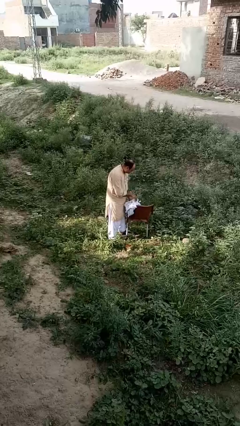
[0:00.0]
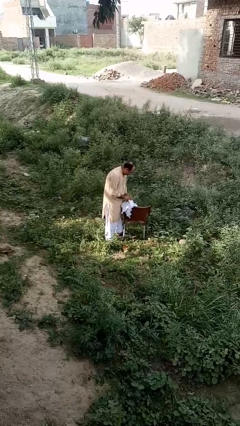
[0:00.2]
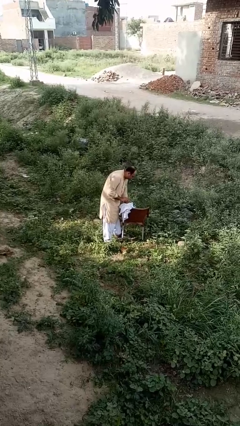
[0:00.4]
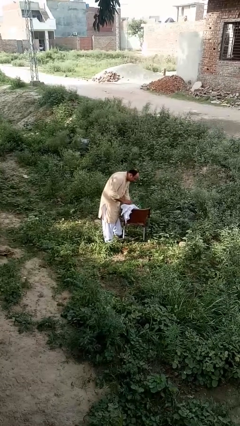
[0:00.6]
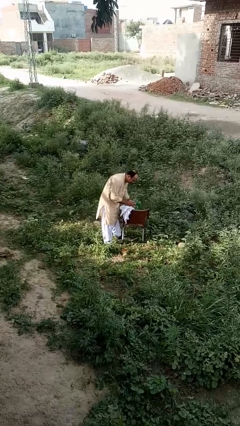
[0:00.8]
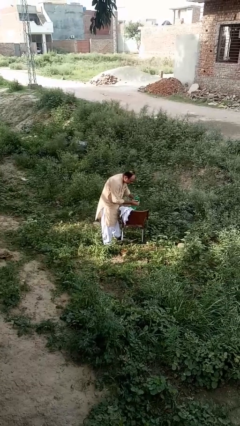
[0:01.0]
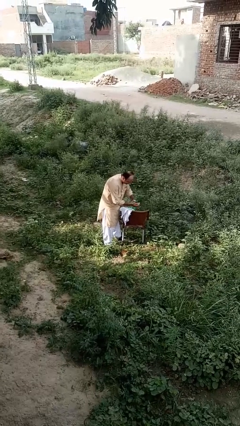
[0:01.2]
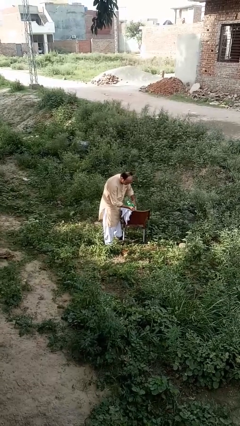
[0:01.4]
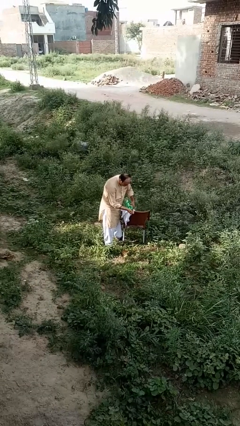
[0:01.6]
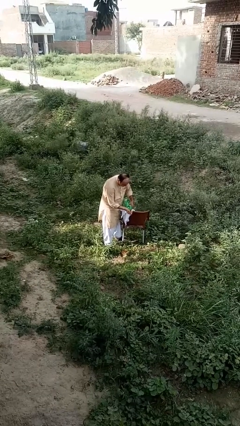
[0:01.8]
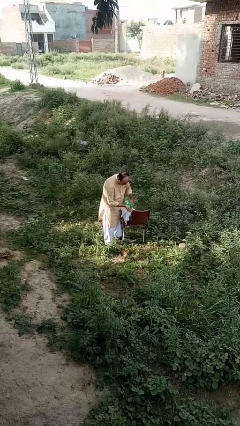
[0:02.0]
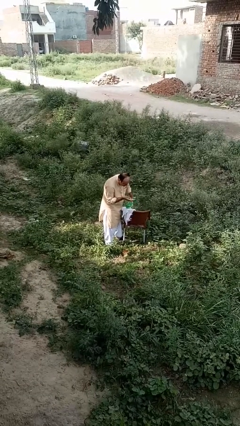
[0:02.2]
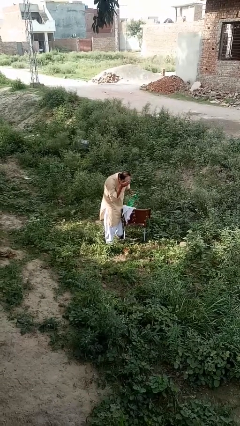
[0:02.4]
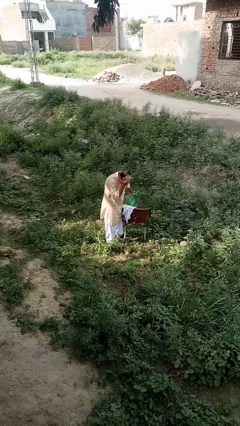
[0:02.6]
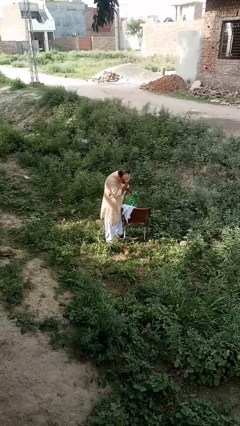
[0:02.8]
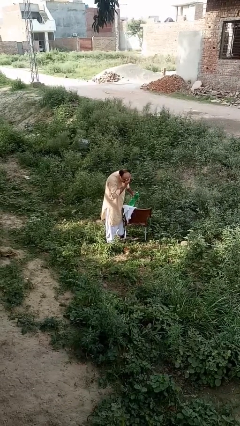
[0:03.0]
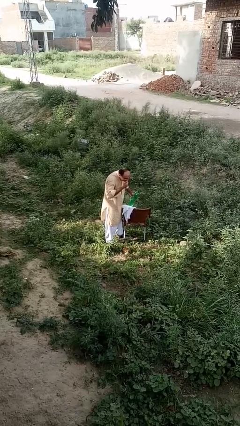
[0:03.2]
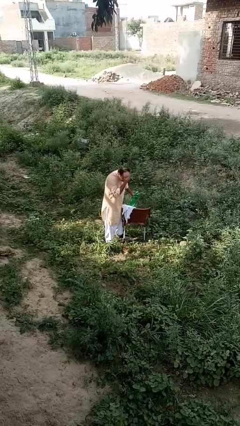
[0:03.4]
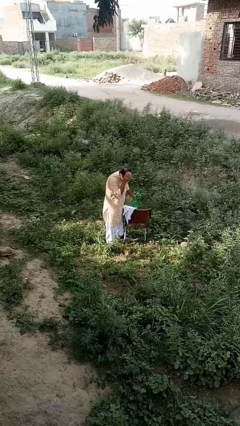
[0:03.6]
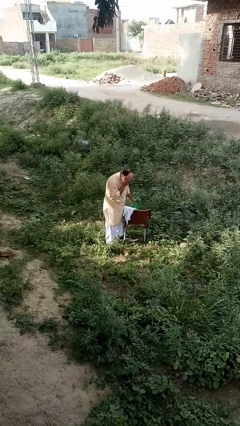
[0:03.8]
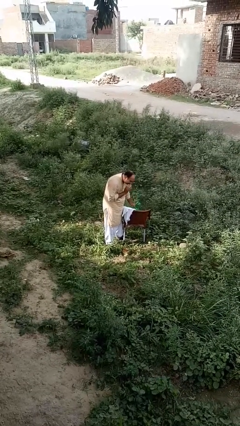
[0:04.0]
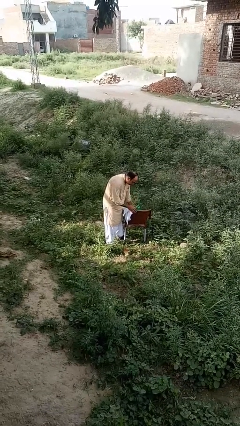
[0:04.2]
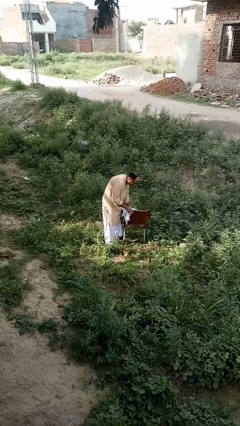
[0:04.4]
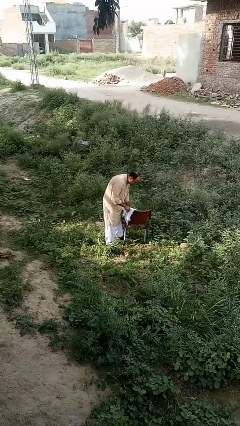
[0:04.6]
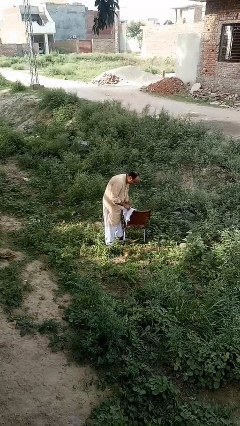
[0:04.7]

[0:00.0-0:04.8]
person washes face

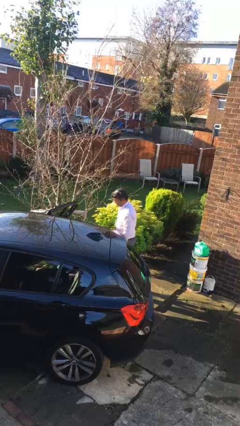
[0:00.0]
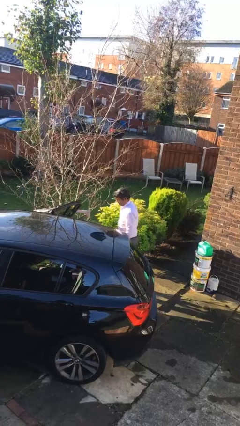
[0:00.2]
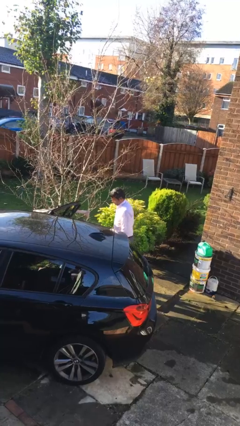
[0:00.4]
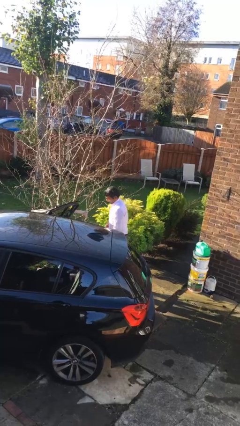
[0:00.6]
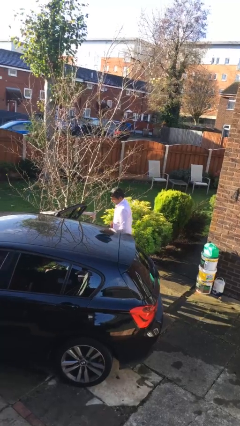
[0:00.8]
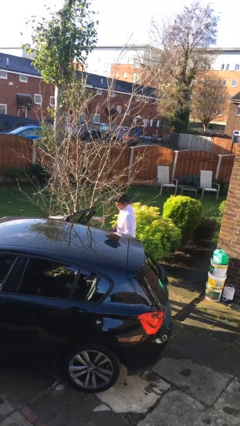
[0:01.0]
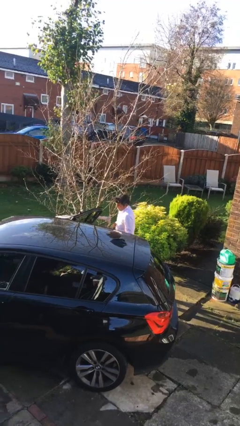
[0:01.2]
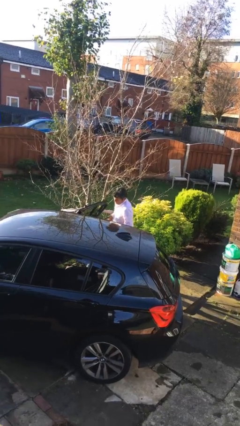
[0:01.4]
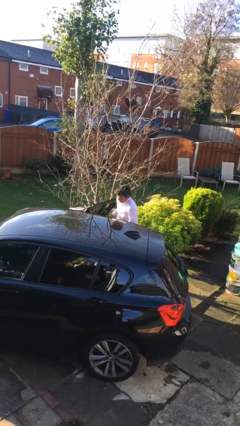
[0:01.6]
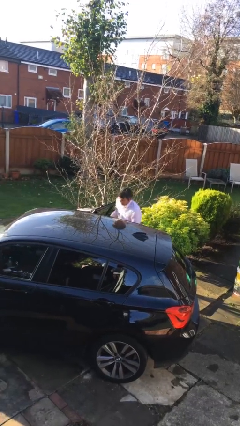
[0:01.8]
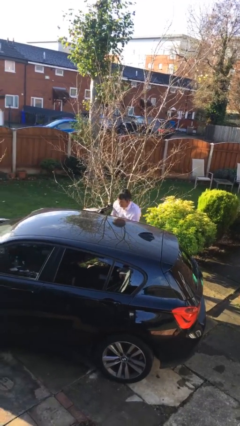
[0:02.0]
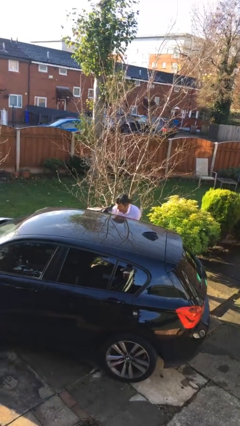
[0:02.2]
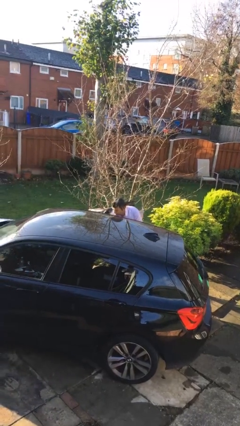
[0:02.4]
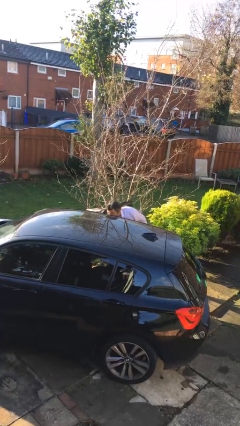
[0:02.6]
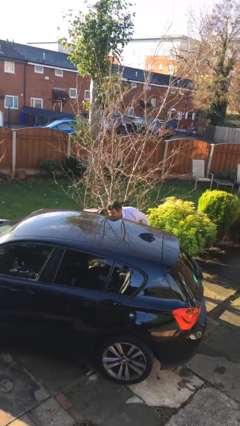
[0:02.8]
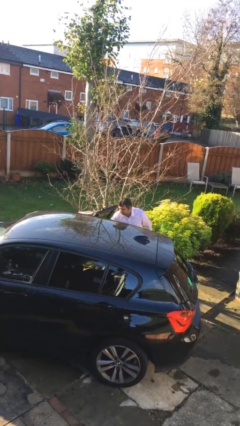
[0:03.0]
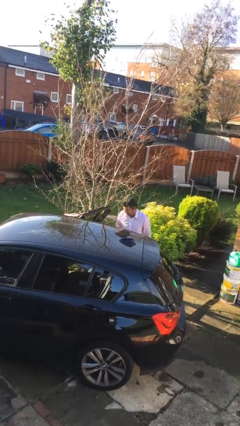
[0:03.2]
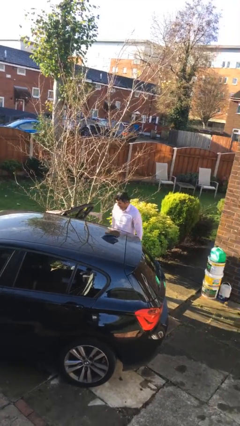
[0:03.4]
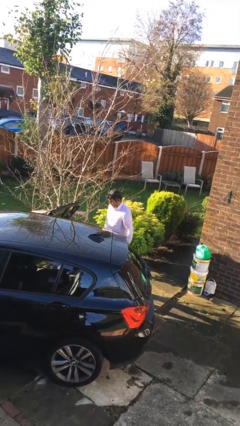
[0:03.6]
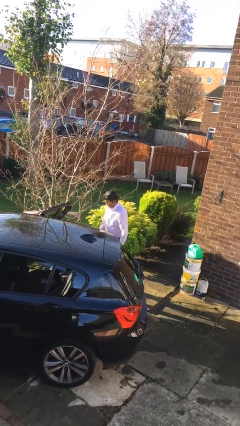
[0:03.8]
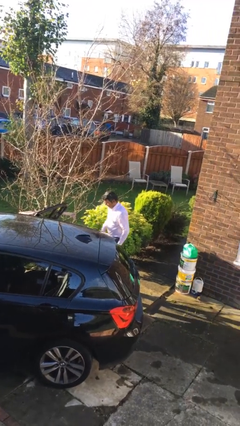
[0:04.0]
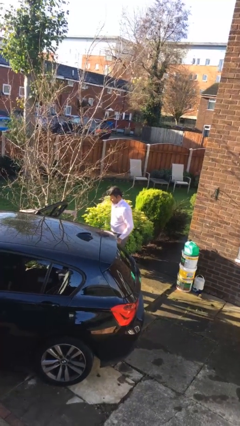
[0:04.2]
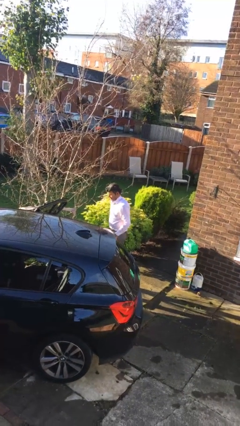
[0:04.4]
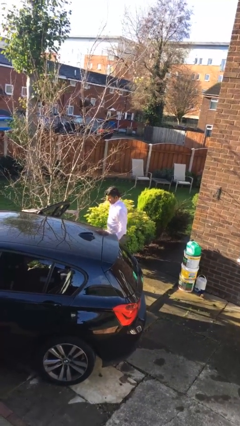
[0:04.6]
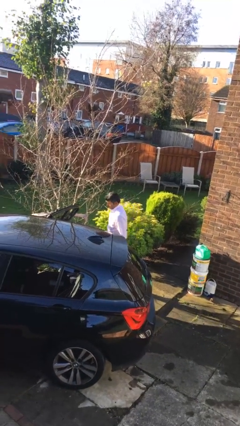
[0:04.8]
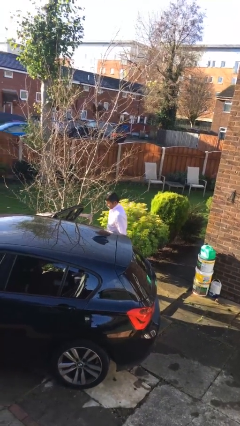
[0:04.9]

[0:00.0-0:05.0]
person loads car

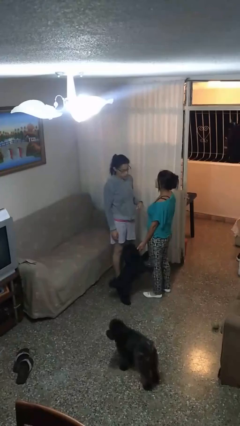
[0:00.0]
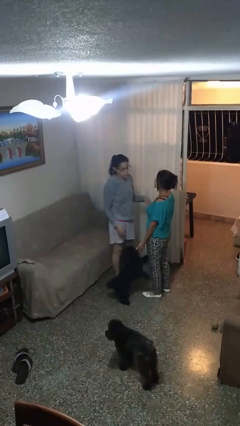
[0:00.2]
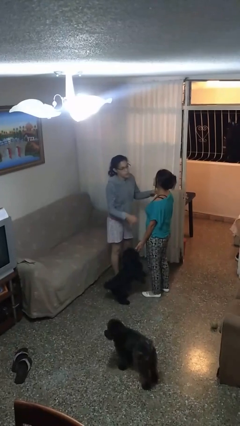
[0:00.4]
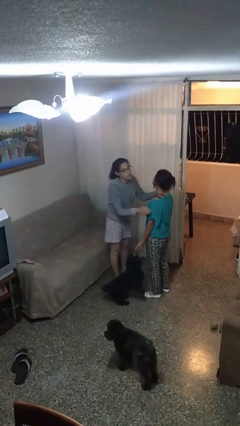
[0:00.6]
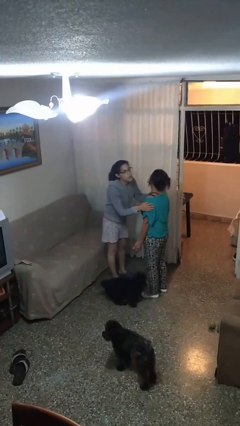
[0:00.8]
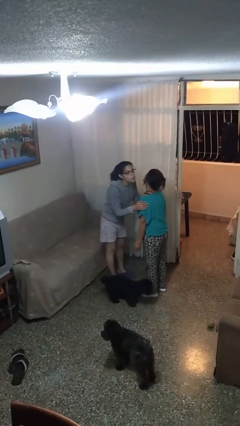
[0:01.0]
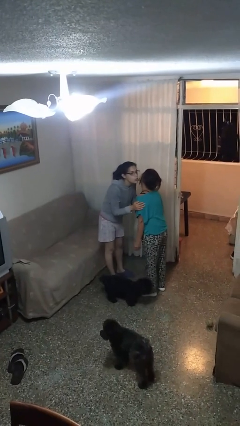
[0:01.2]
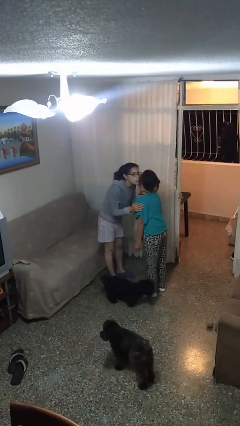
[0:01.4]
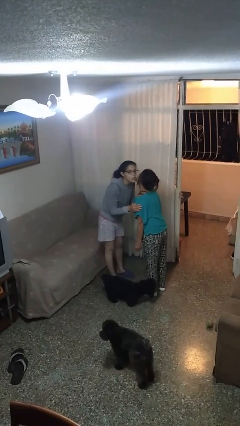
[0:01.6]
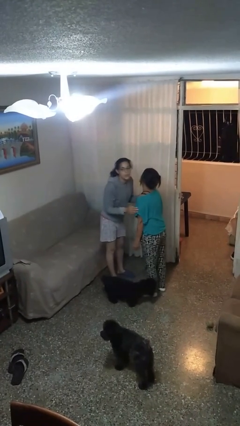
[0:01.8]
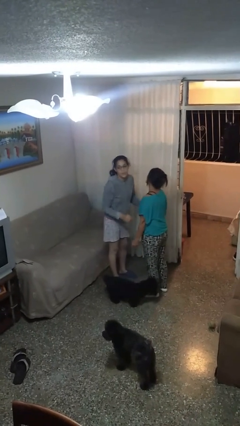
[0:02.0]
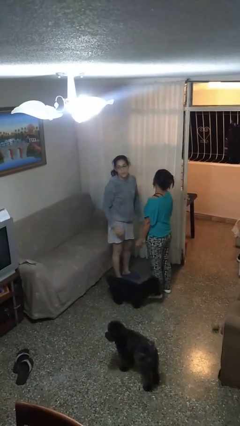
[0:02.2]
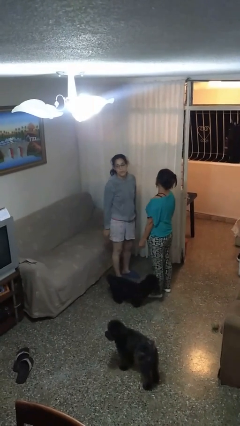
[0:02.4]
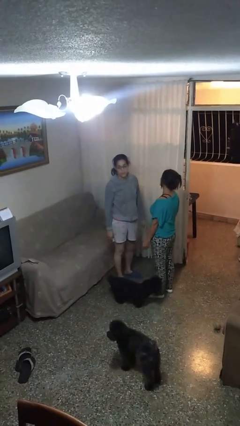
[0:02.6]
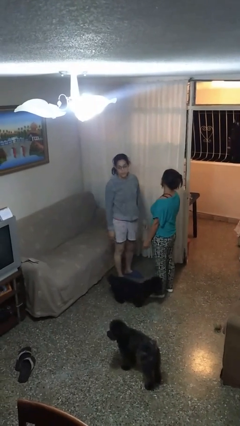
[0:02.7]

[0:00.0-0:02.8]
person kisses cheek of person

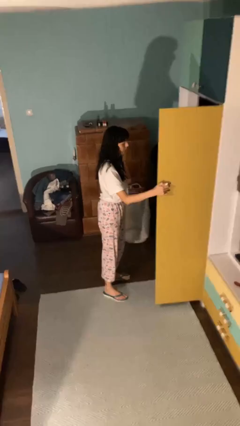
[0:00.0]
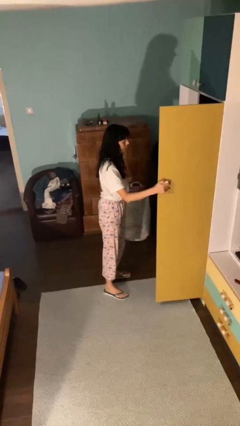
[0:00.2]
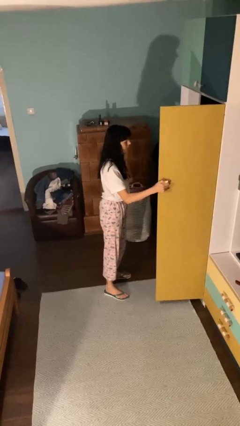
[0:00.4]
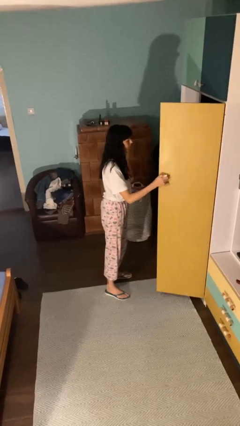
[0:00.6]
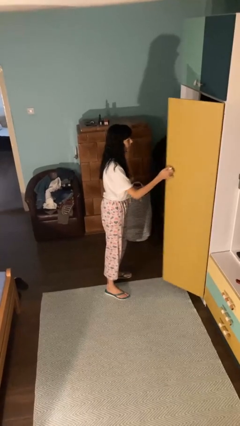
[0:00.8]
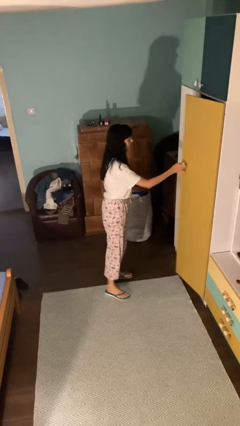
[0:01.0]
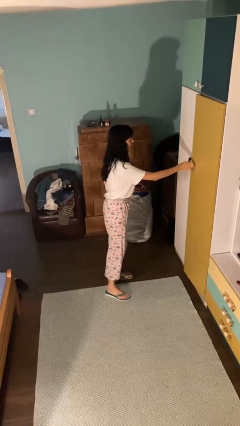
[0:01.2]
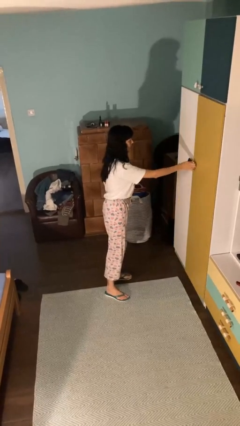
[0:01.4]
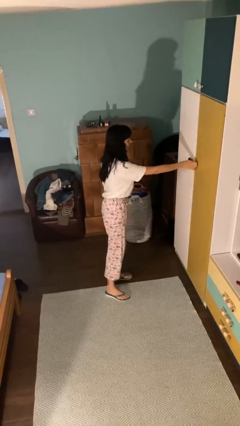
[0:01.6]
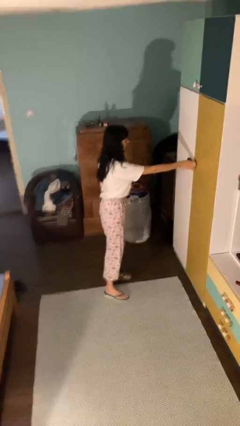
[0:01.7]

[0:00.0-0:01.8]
person closes closet door

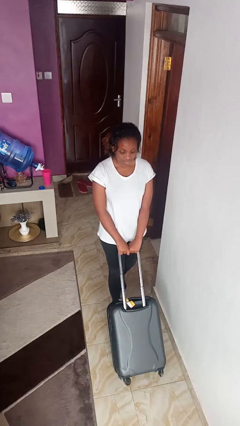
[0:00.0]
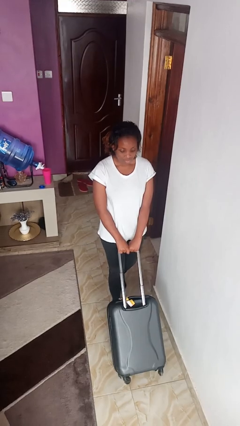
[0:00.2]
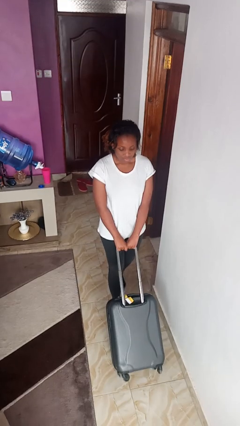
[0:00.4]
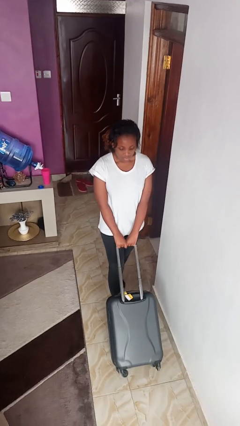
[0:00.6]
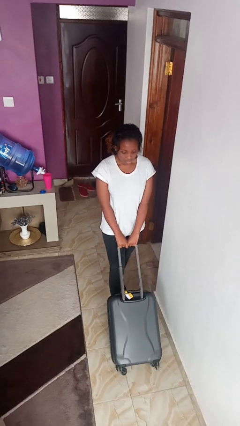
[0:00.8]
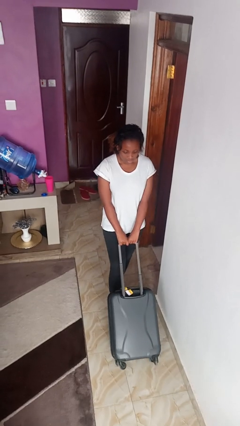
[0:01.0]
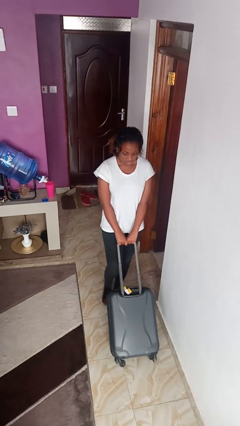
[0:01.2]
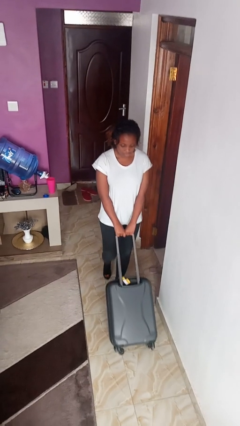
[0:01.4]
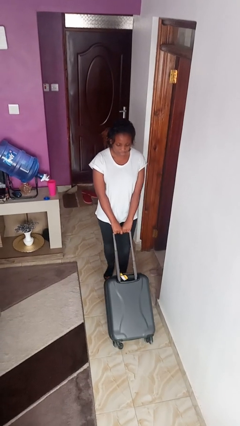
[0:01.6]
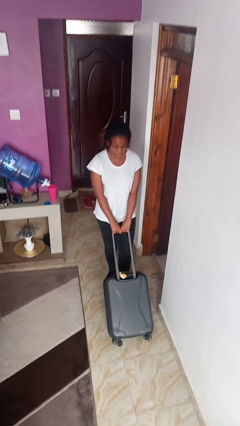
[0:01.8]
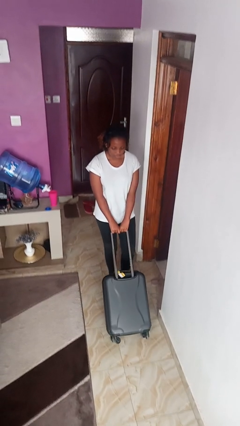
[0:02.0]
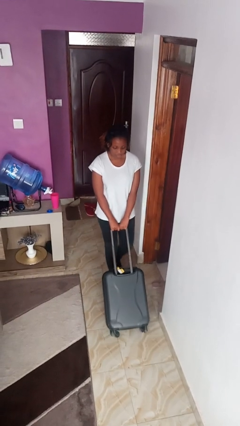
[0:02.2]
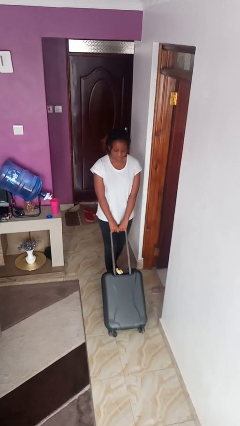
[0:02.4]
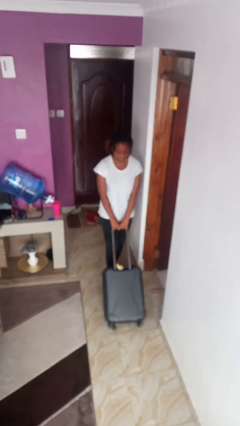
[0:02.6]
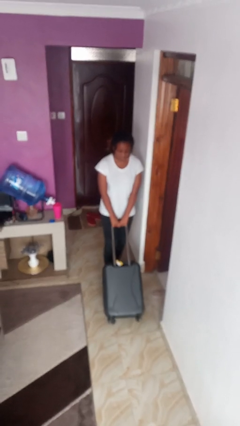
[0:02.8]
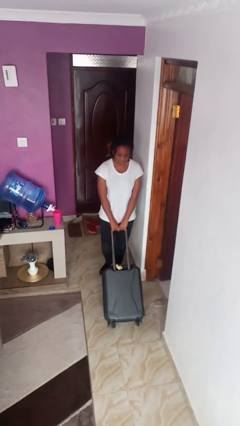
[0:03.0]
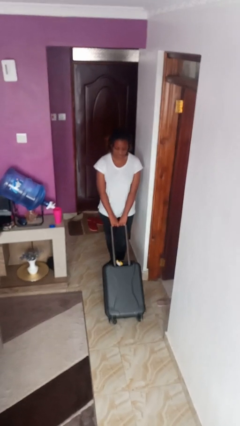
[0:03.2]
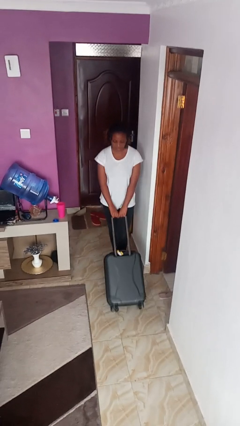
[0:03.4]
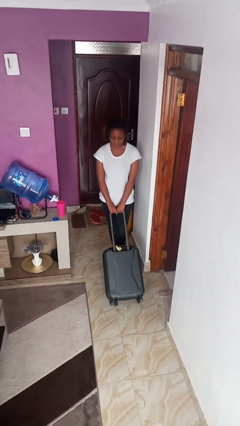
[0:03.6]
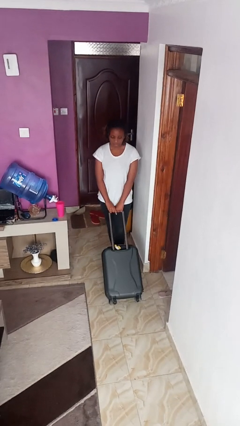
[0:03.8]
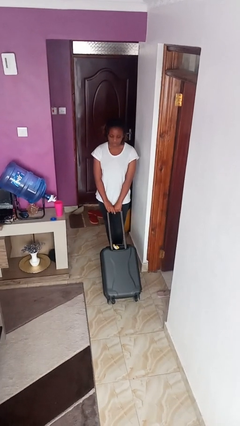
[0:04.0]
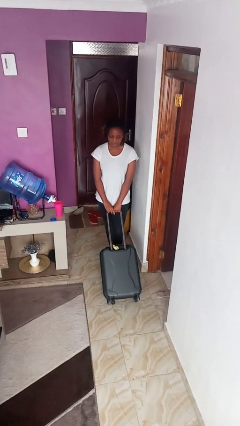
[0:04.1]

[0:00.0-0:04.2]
person pulls wheeled cart
